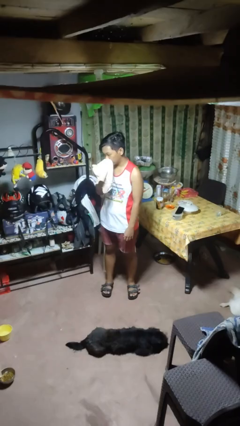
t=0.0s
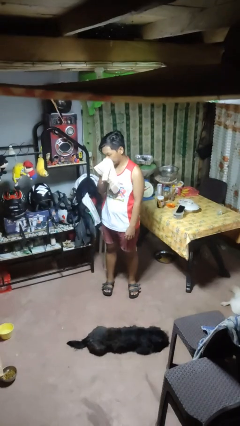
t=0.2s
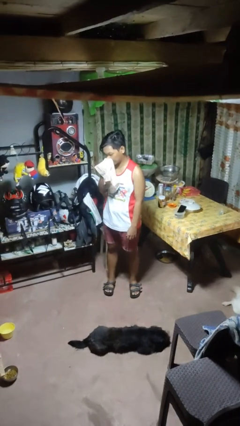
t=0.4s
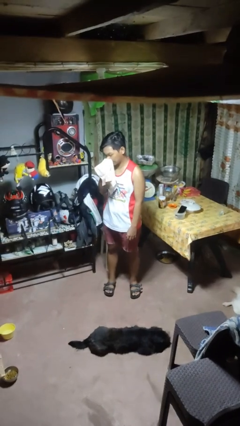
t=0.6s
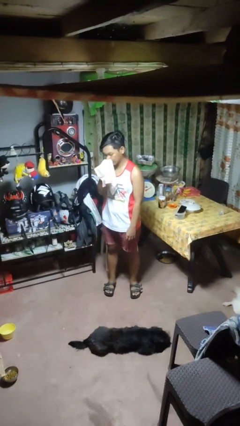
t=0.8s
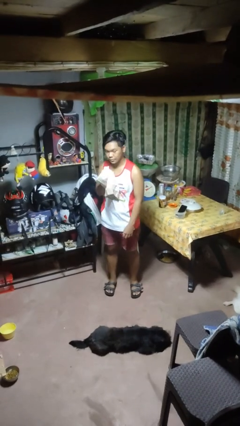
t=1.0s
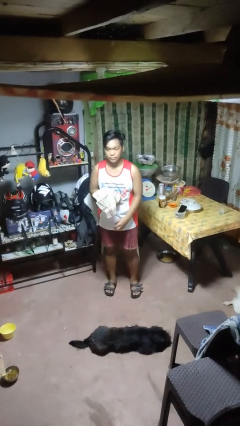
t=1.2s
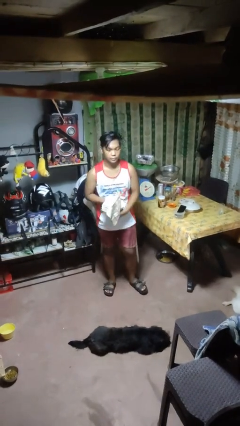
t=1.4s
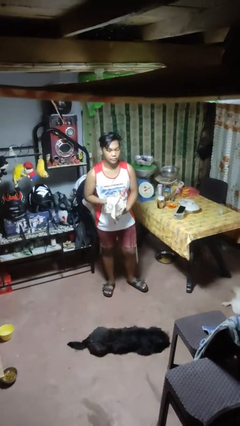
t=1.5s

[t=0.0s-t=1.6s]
person blows nose

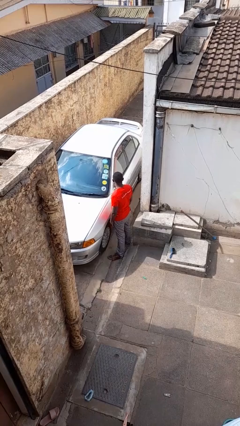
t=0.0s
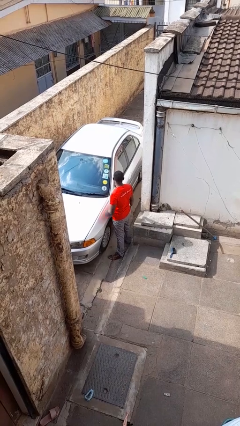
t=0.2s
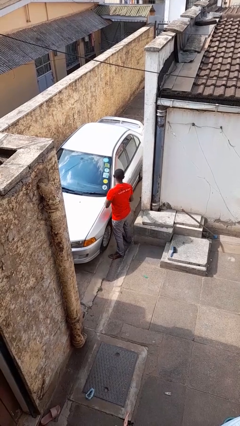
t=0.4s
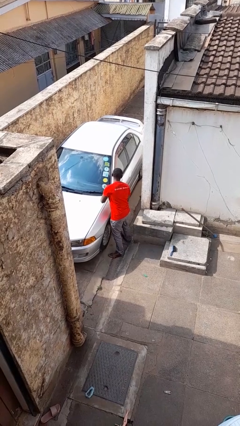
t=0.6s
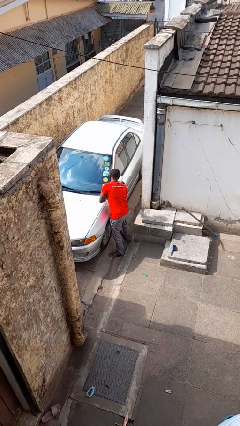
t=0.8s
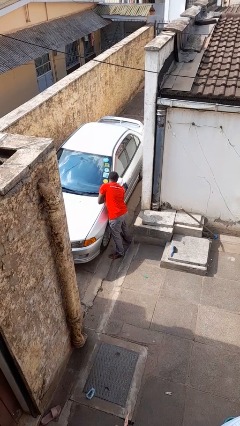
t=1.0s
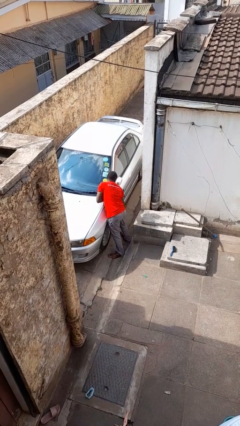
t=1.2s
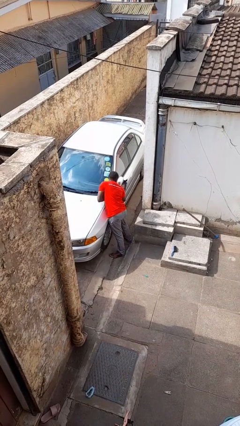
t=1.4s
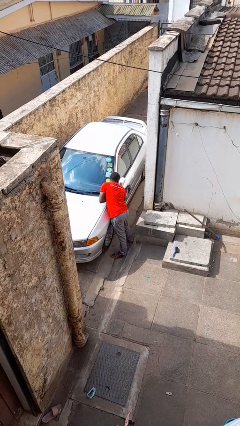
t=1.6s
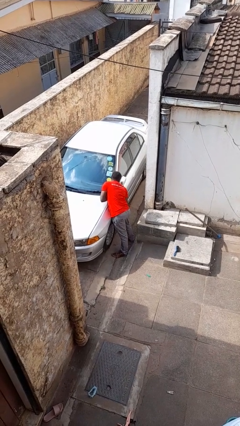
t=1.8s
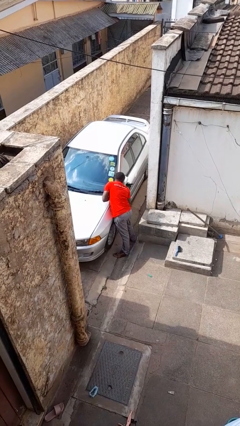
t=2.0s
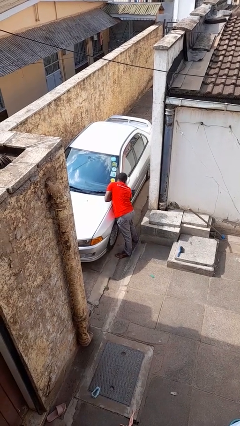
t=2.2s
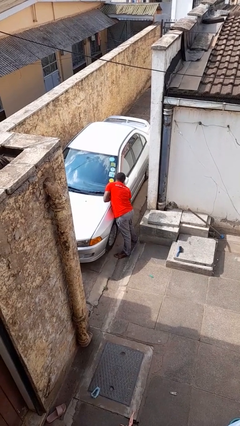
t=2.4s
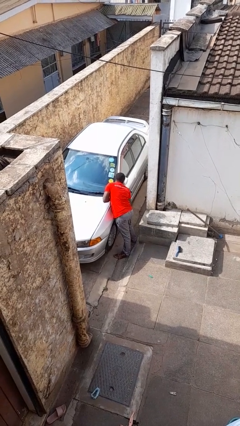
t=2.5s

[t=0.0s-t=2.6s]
person polishes car with rag

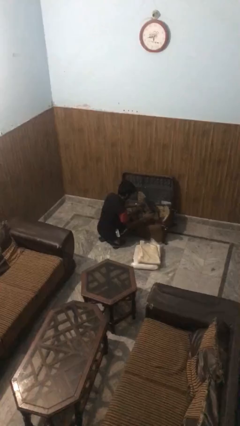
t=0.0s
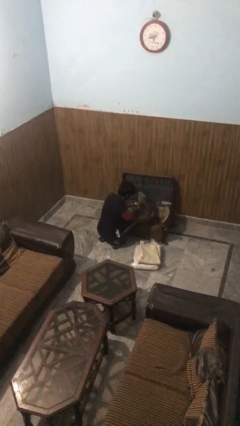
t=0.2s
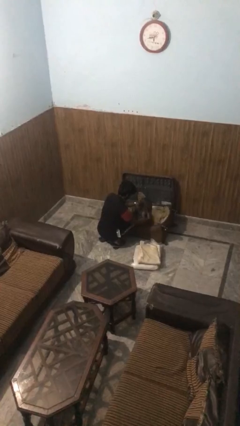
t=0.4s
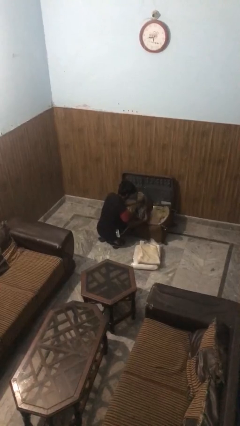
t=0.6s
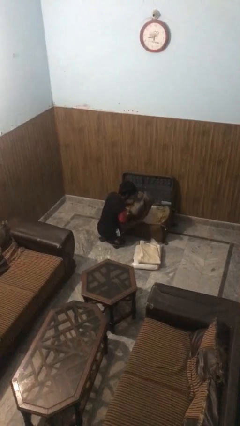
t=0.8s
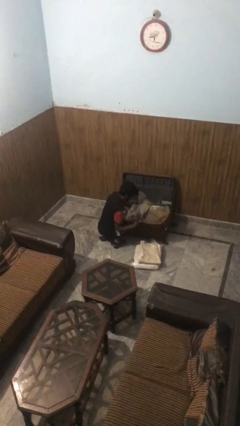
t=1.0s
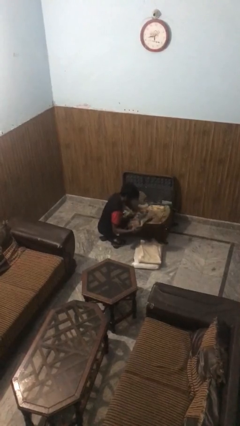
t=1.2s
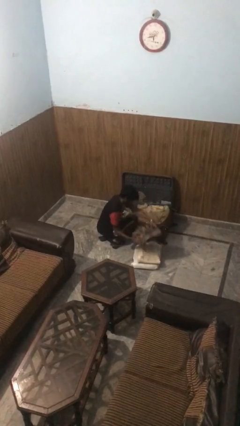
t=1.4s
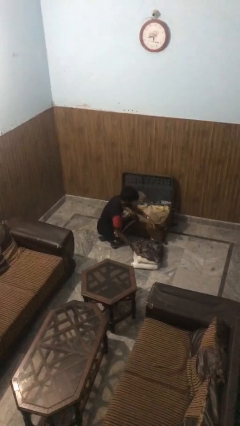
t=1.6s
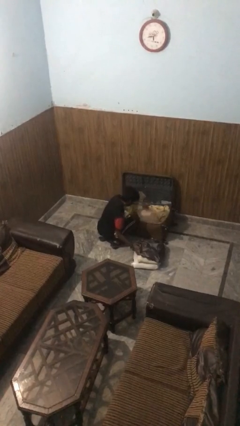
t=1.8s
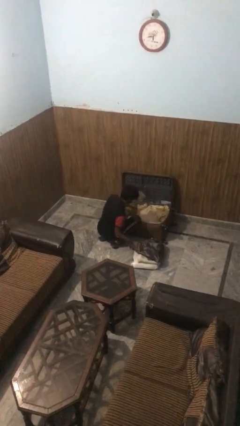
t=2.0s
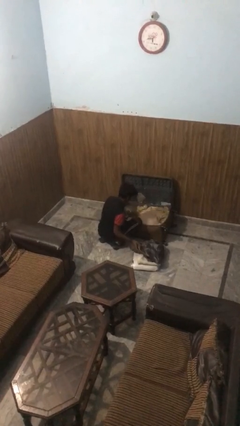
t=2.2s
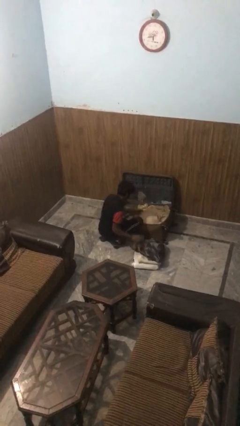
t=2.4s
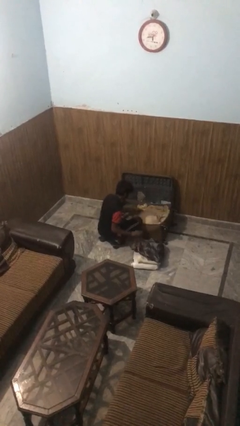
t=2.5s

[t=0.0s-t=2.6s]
person unloads clothes from suitcase

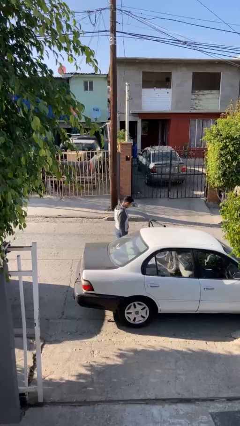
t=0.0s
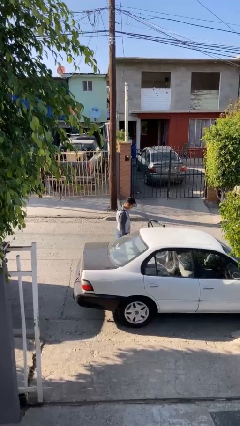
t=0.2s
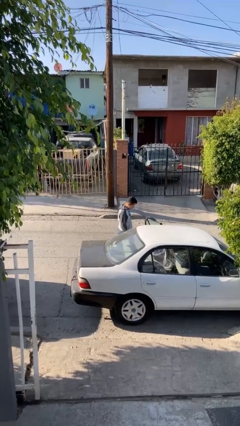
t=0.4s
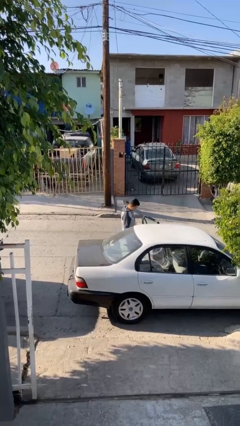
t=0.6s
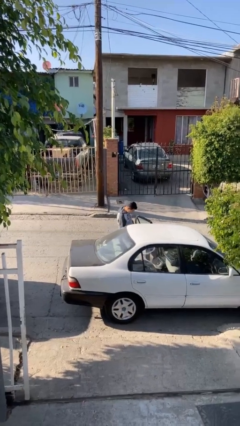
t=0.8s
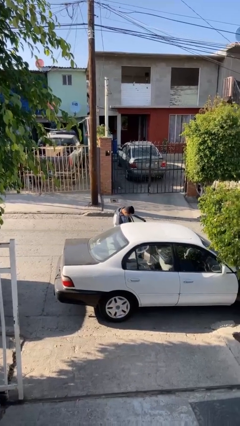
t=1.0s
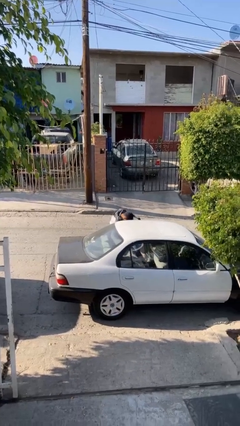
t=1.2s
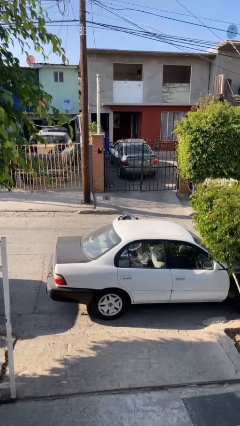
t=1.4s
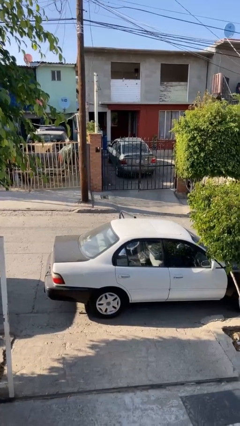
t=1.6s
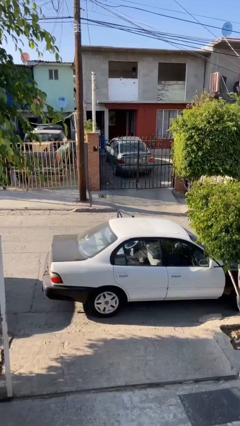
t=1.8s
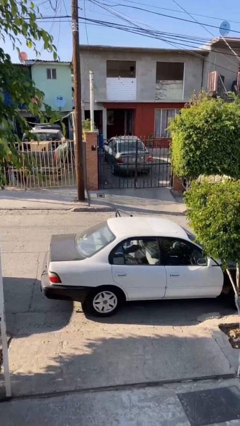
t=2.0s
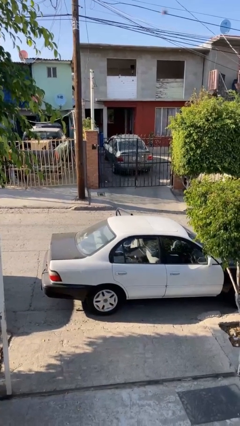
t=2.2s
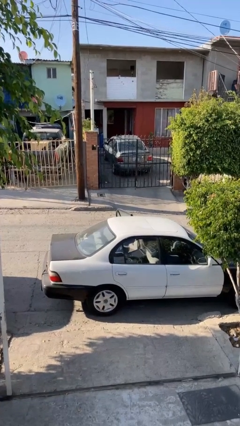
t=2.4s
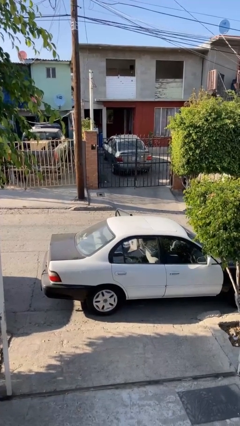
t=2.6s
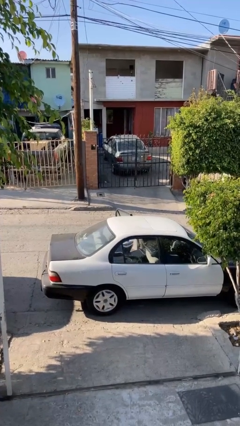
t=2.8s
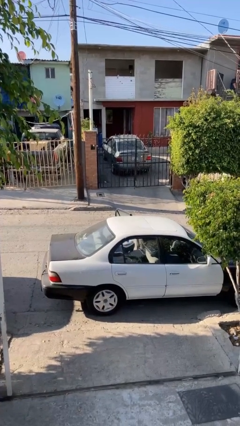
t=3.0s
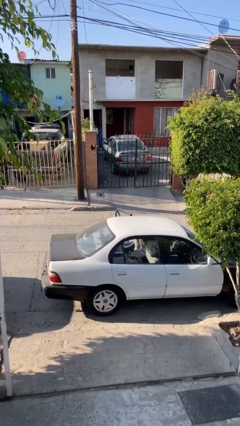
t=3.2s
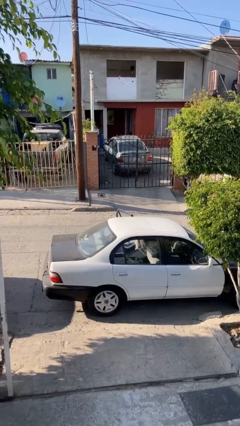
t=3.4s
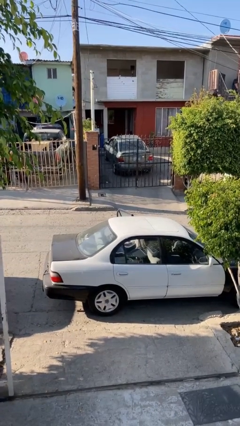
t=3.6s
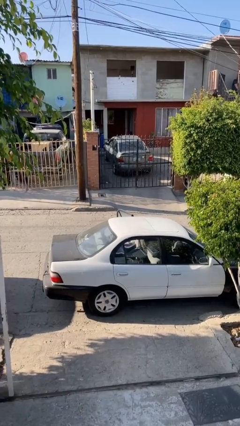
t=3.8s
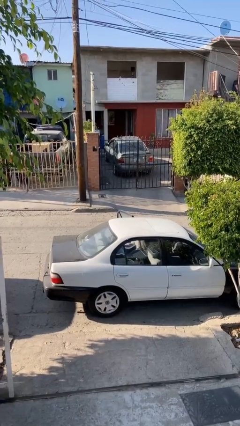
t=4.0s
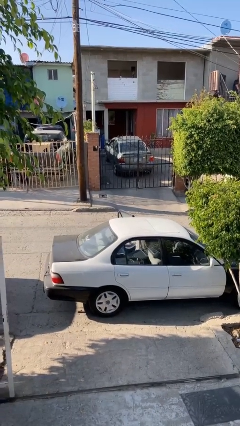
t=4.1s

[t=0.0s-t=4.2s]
person enters car

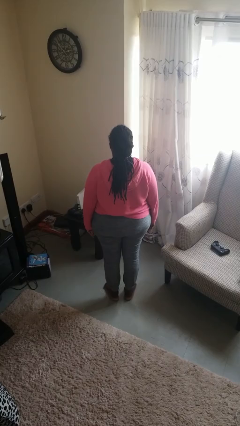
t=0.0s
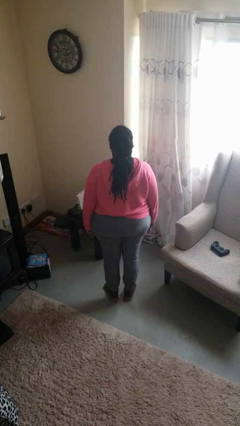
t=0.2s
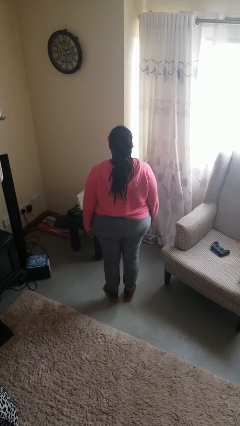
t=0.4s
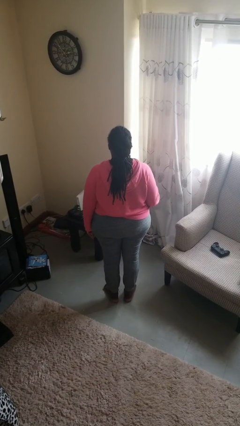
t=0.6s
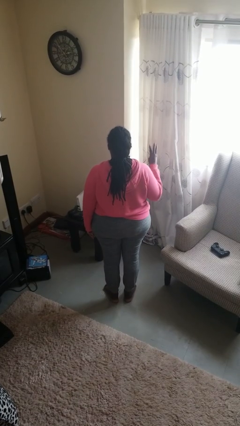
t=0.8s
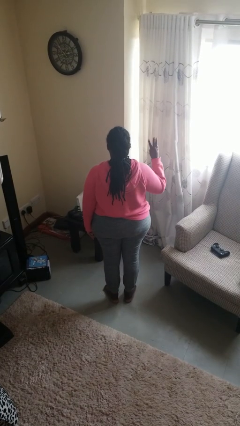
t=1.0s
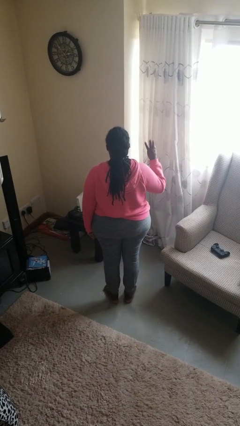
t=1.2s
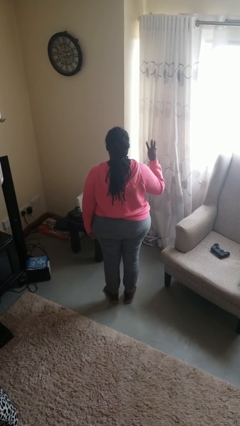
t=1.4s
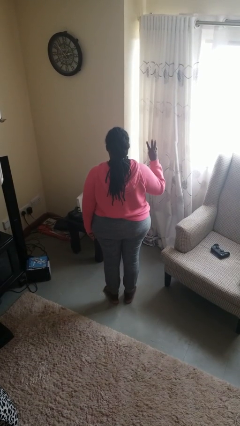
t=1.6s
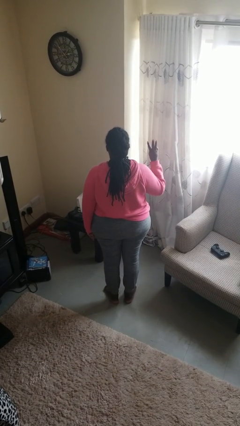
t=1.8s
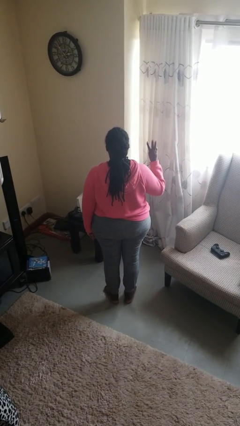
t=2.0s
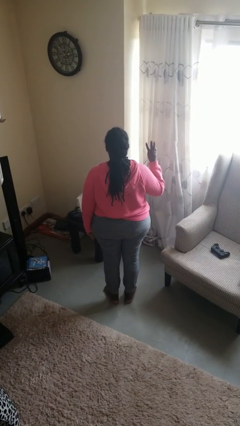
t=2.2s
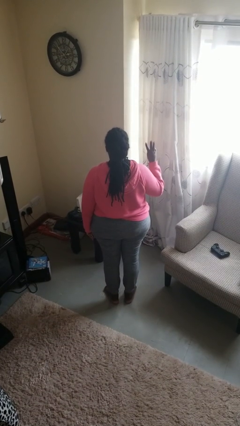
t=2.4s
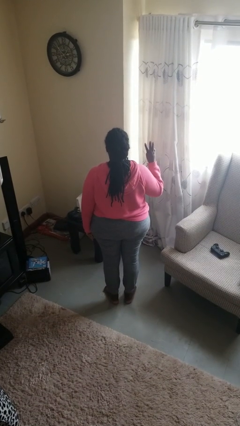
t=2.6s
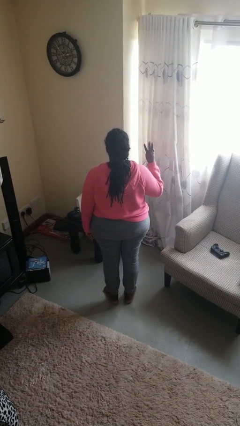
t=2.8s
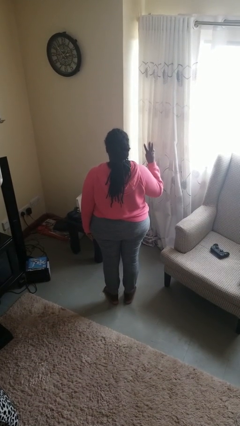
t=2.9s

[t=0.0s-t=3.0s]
person gestures number three

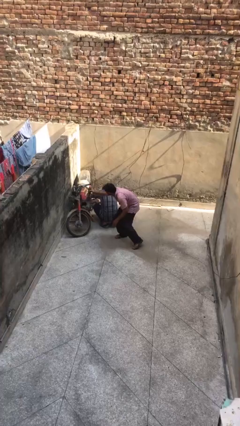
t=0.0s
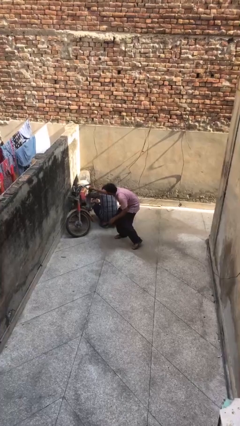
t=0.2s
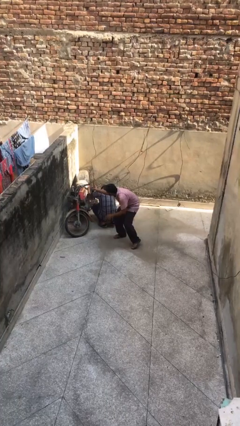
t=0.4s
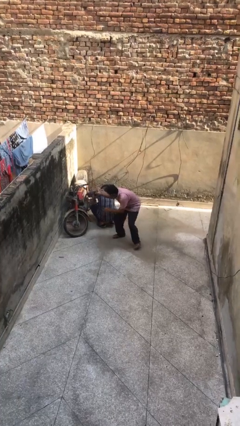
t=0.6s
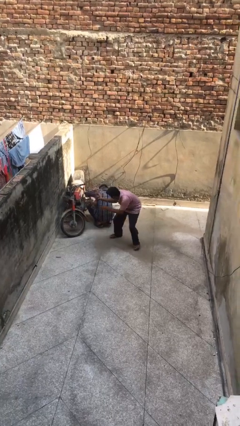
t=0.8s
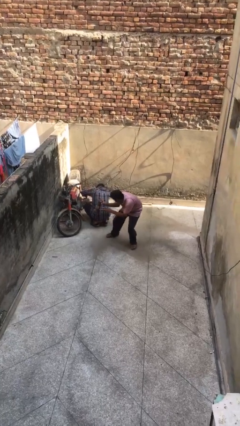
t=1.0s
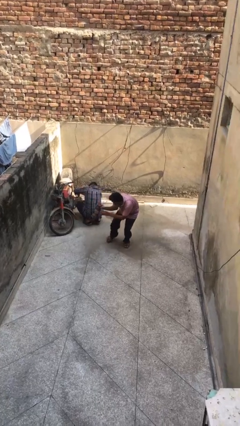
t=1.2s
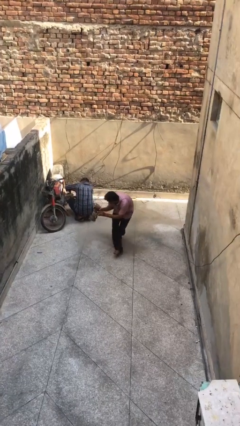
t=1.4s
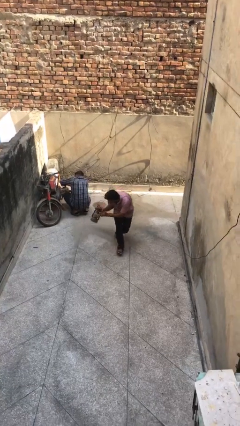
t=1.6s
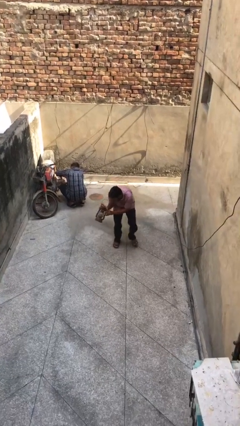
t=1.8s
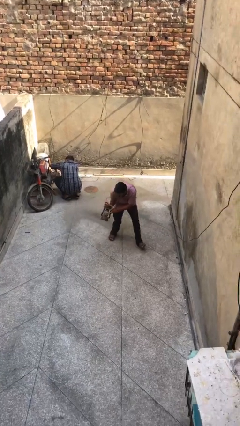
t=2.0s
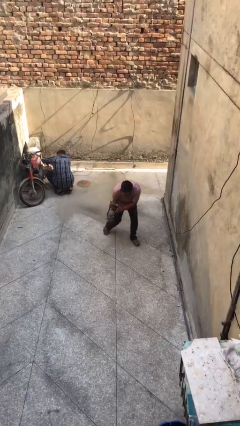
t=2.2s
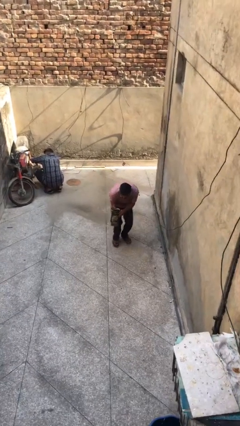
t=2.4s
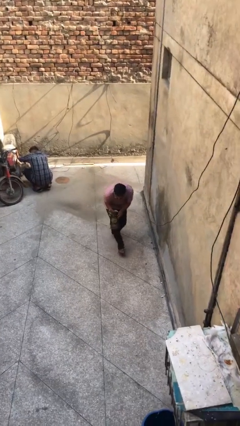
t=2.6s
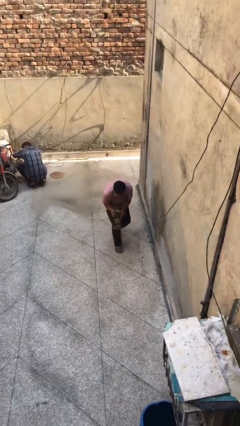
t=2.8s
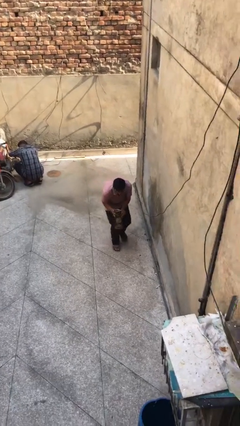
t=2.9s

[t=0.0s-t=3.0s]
person steals object from person

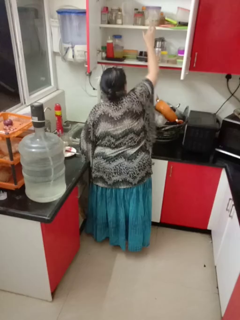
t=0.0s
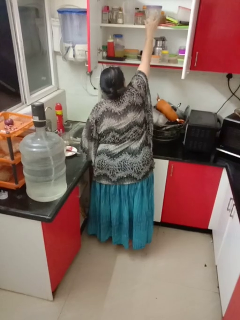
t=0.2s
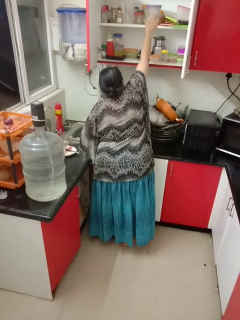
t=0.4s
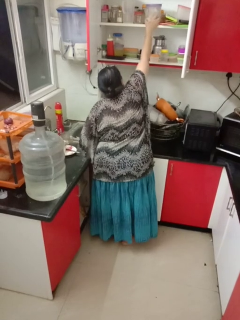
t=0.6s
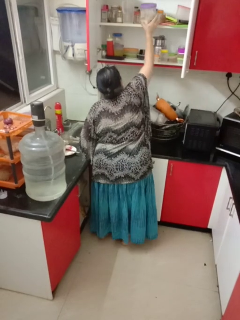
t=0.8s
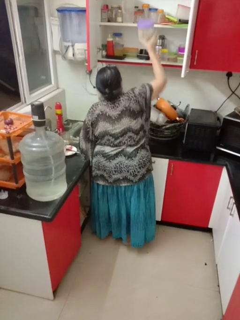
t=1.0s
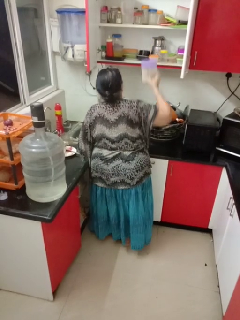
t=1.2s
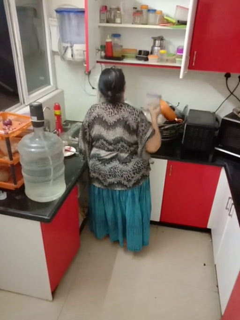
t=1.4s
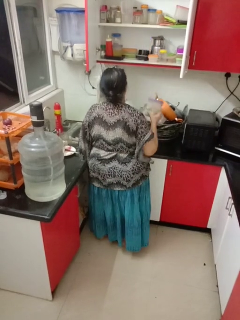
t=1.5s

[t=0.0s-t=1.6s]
person takes object from cabinet
